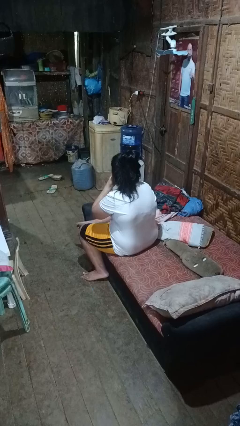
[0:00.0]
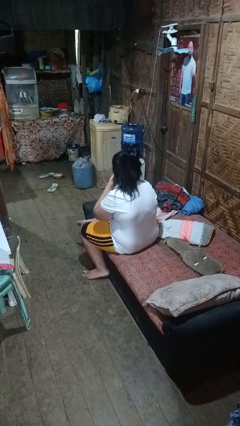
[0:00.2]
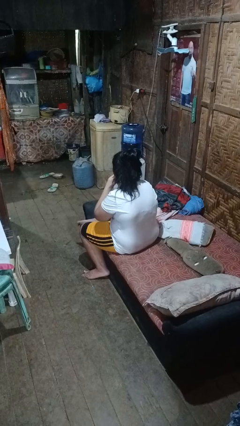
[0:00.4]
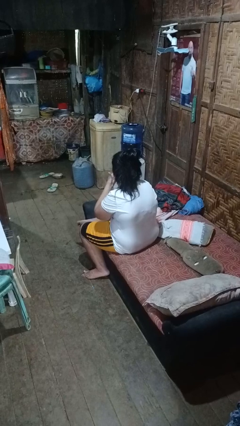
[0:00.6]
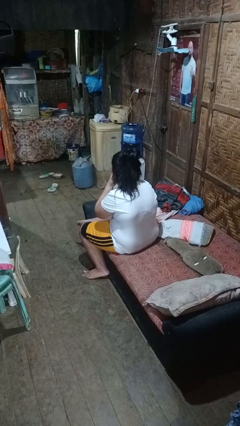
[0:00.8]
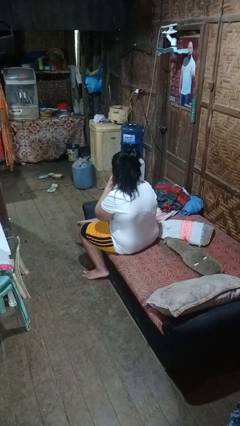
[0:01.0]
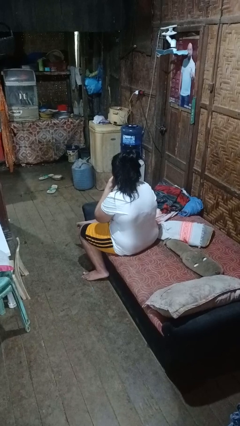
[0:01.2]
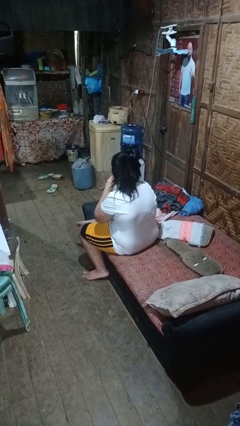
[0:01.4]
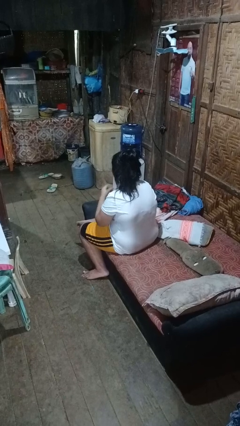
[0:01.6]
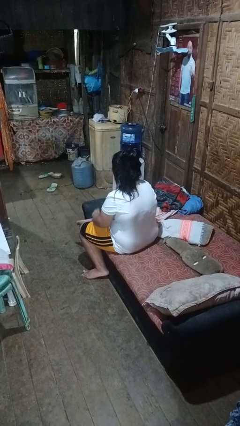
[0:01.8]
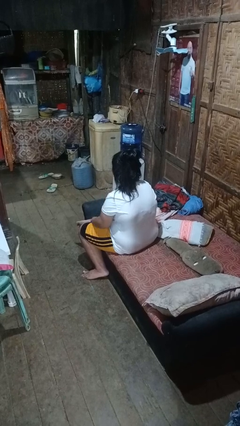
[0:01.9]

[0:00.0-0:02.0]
person strokes chin

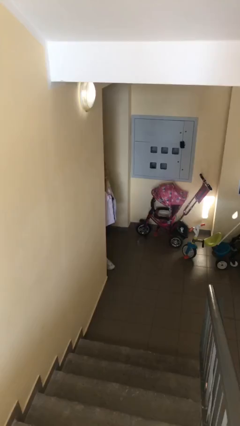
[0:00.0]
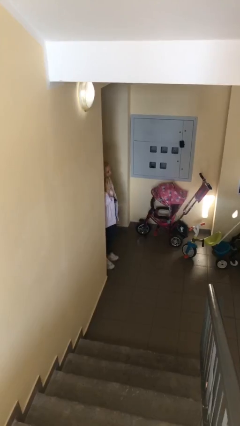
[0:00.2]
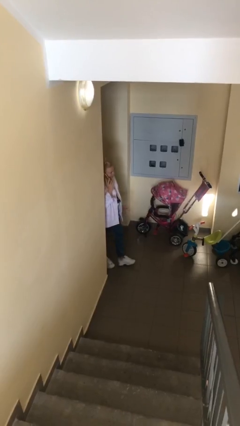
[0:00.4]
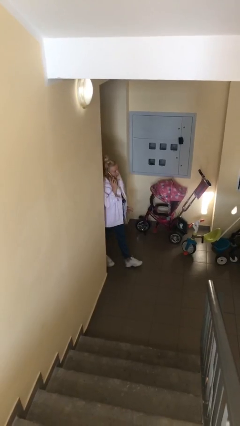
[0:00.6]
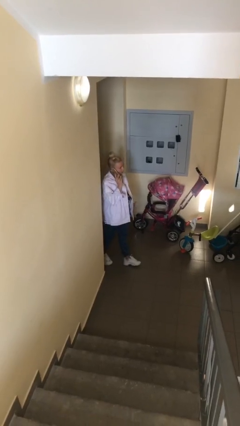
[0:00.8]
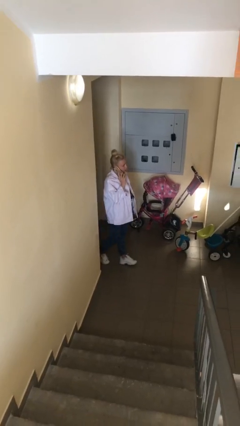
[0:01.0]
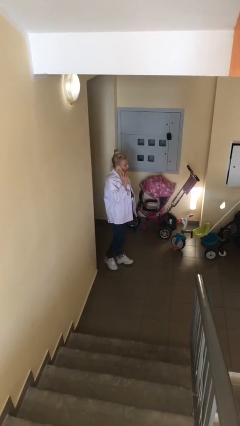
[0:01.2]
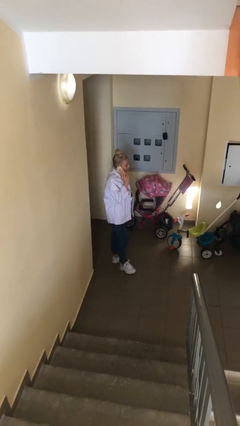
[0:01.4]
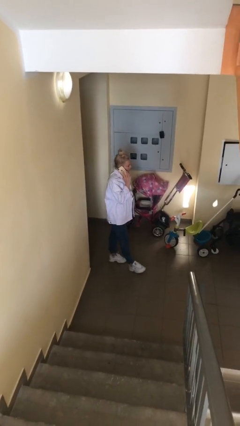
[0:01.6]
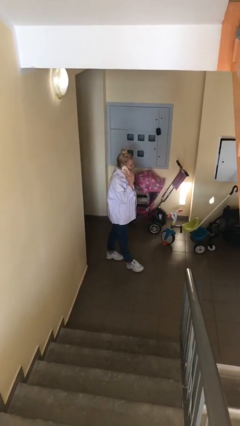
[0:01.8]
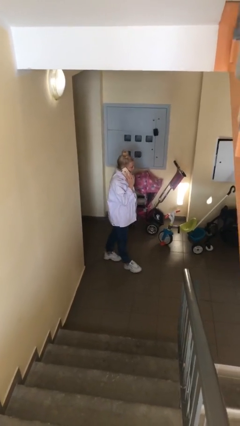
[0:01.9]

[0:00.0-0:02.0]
person enters scene through structure

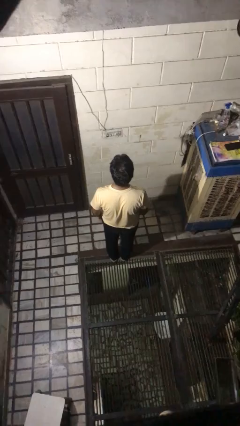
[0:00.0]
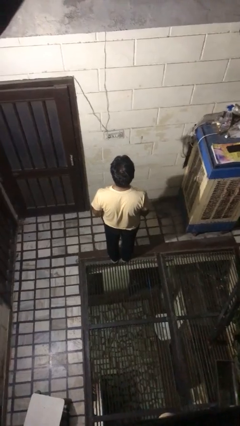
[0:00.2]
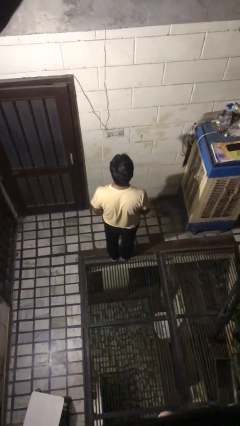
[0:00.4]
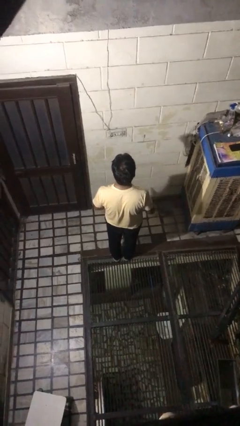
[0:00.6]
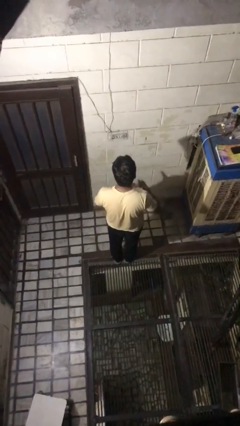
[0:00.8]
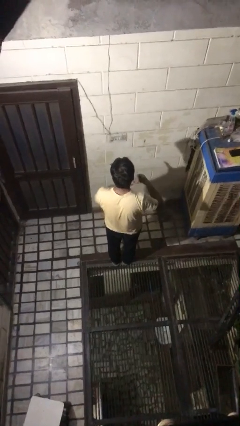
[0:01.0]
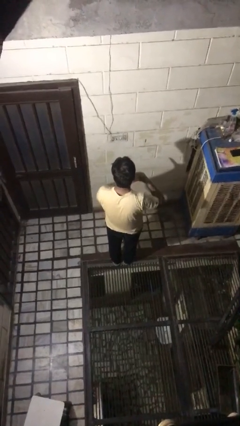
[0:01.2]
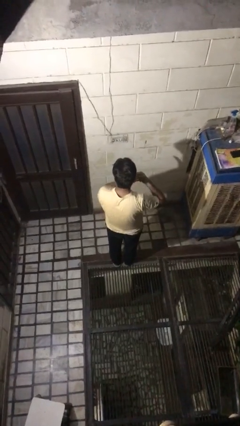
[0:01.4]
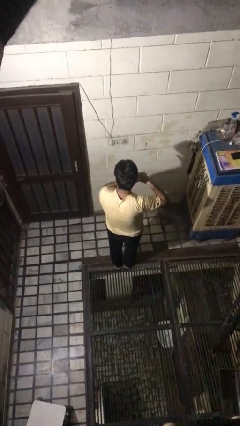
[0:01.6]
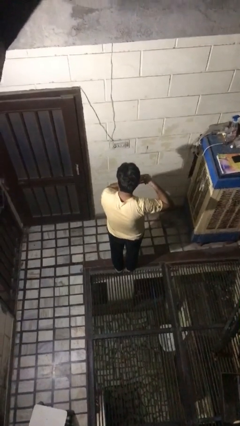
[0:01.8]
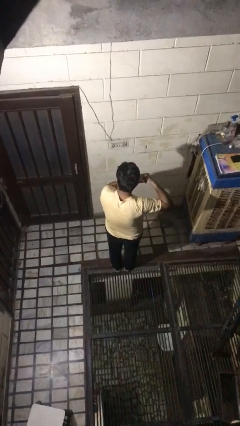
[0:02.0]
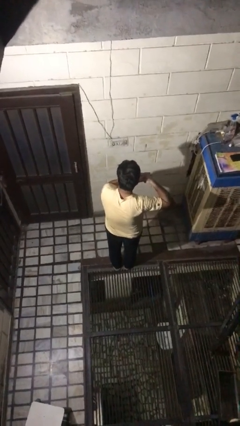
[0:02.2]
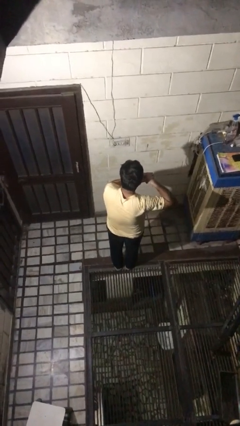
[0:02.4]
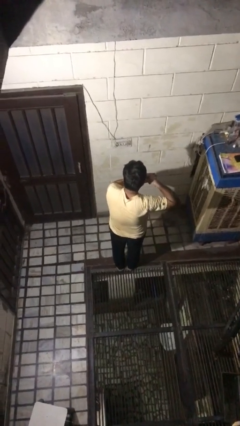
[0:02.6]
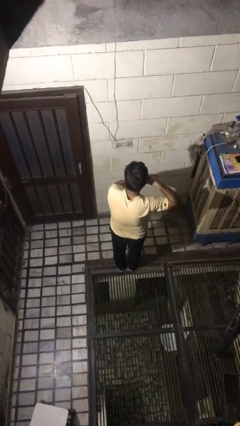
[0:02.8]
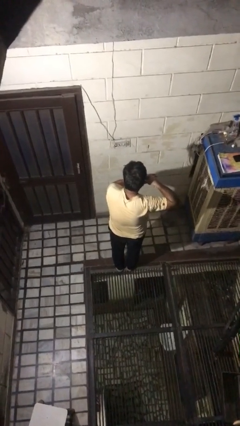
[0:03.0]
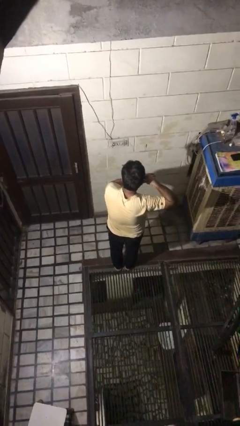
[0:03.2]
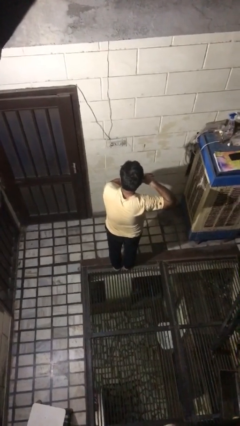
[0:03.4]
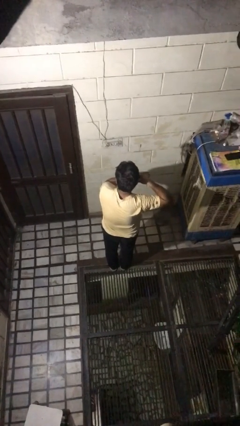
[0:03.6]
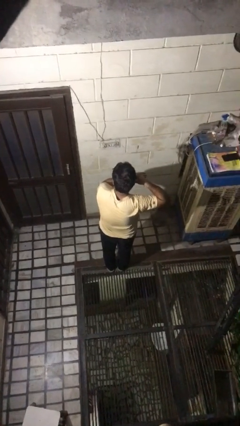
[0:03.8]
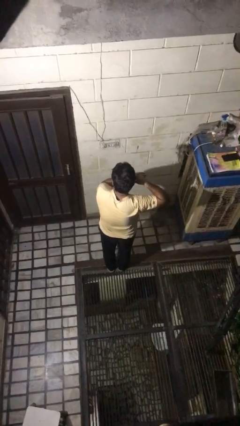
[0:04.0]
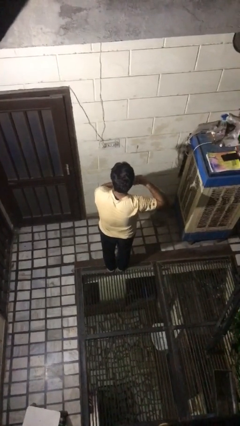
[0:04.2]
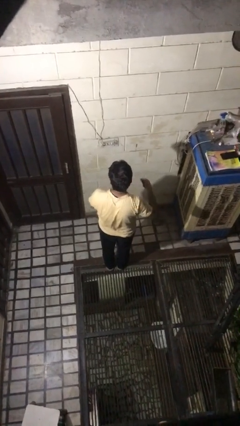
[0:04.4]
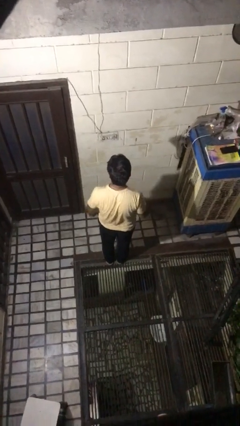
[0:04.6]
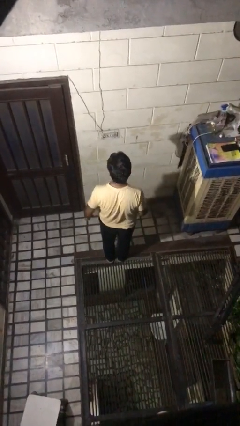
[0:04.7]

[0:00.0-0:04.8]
person gestures call me

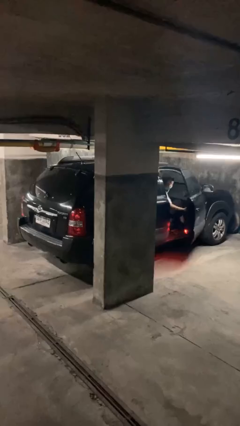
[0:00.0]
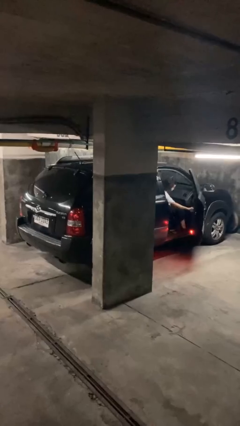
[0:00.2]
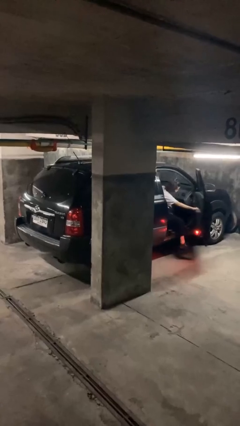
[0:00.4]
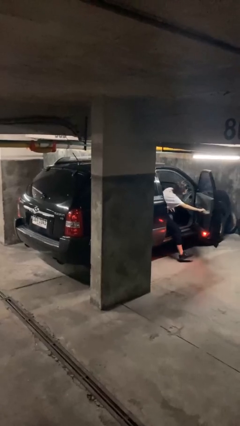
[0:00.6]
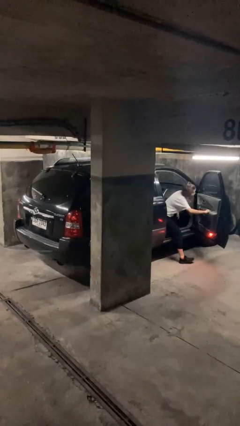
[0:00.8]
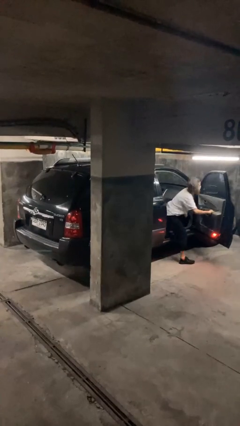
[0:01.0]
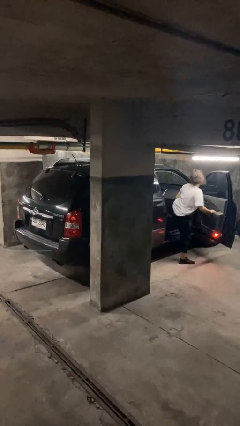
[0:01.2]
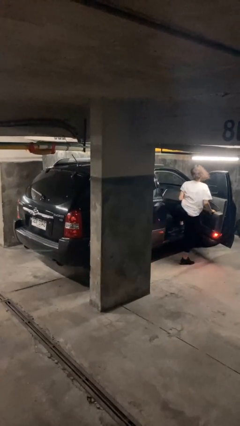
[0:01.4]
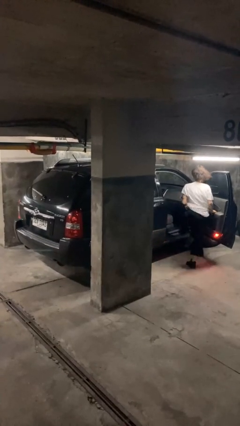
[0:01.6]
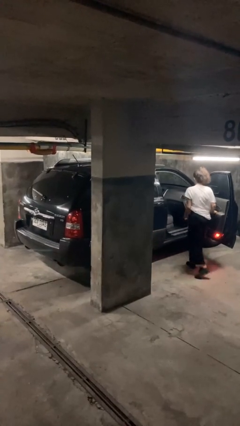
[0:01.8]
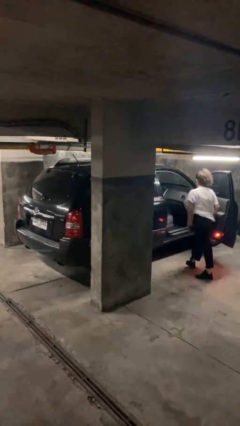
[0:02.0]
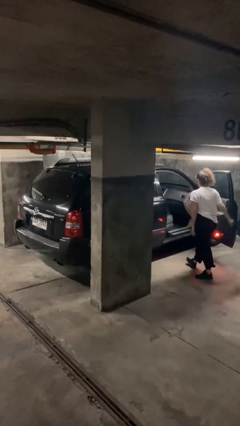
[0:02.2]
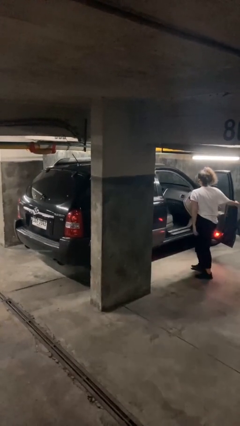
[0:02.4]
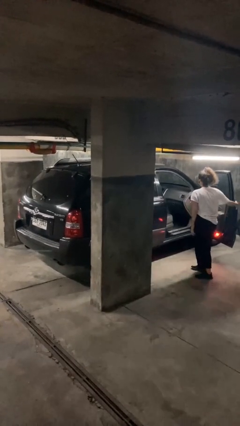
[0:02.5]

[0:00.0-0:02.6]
car drops off person

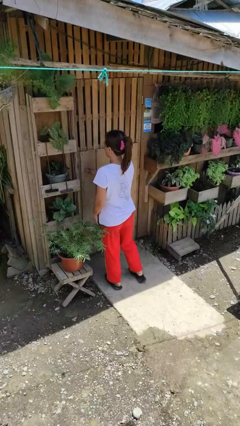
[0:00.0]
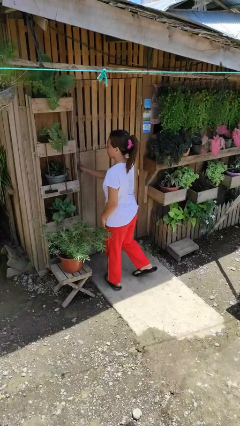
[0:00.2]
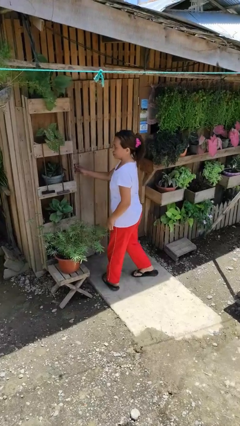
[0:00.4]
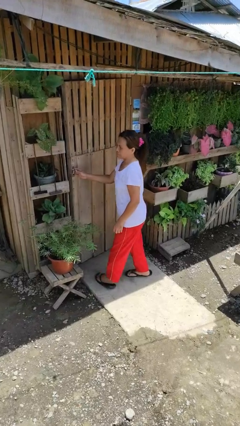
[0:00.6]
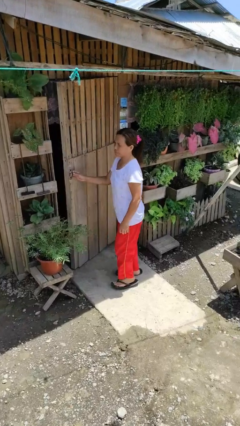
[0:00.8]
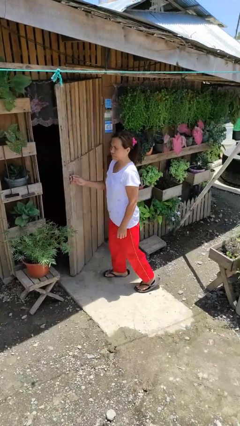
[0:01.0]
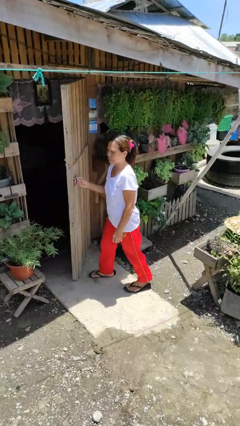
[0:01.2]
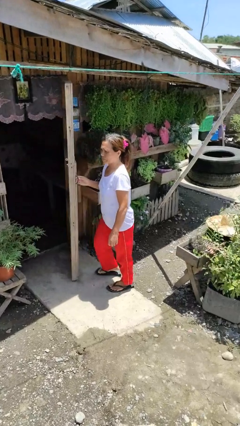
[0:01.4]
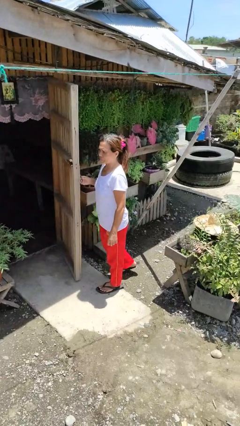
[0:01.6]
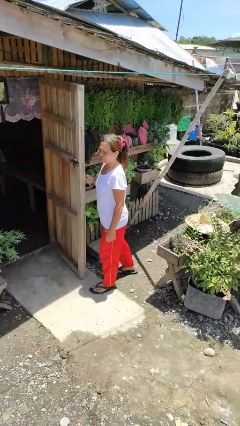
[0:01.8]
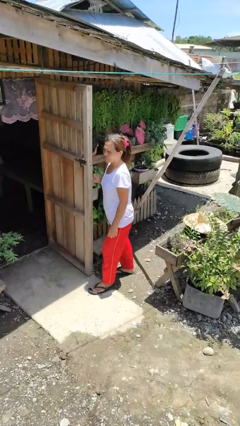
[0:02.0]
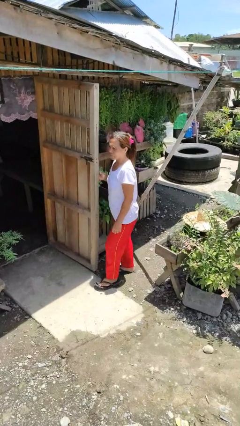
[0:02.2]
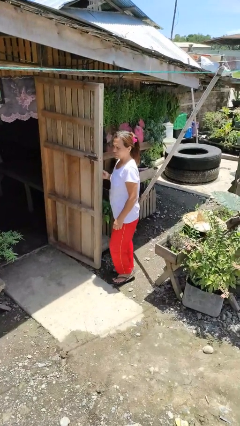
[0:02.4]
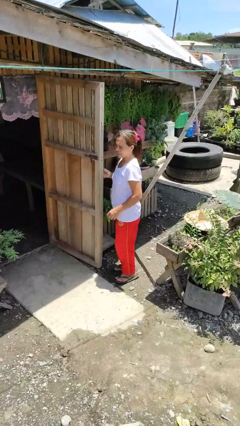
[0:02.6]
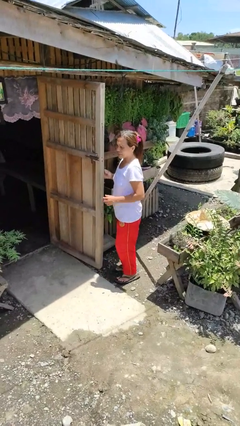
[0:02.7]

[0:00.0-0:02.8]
person opens facility door

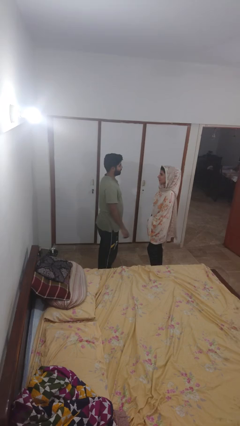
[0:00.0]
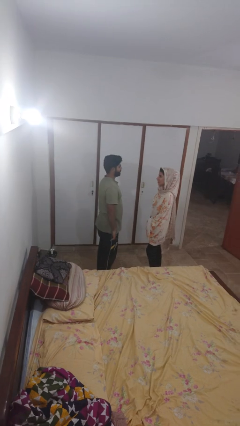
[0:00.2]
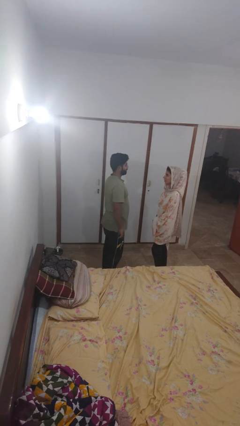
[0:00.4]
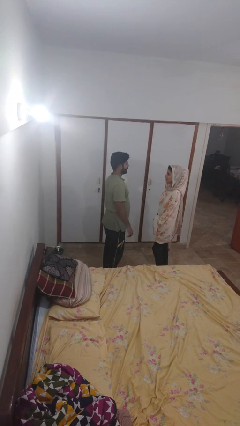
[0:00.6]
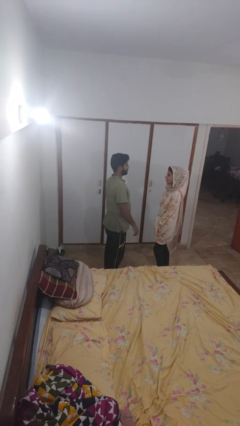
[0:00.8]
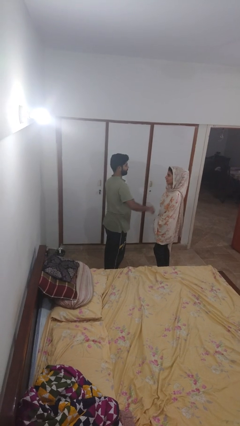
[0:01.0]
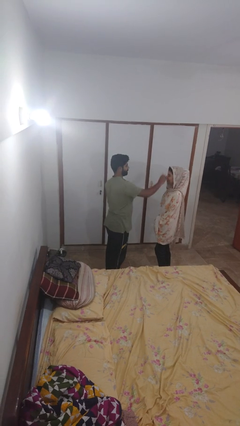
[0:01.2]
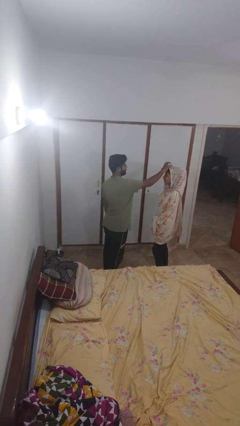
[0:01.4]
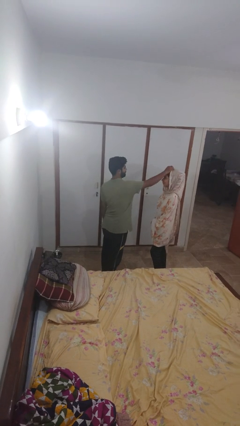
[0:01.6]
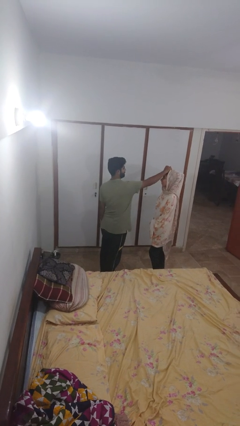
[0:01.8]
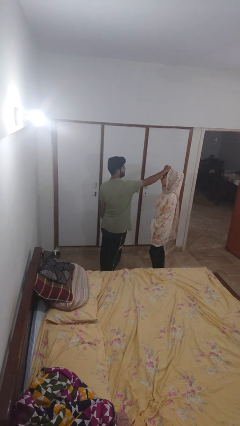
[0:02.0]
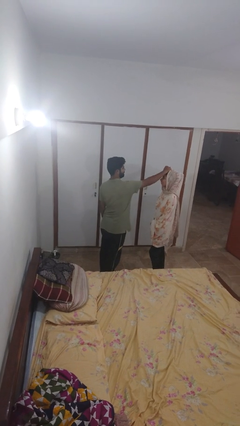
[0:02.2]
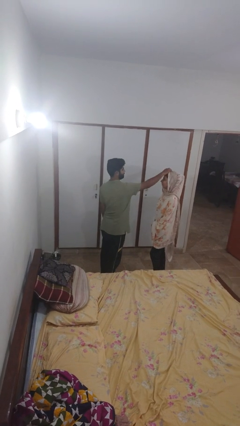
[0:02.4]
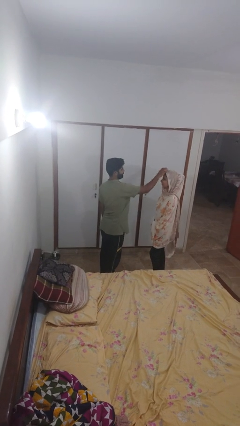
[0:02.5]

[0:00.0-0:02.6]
person grabs person by hair
